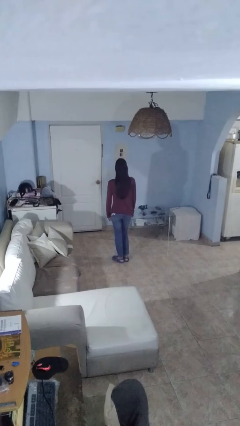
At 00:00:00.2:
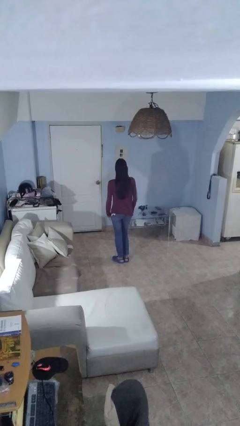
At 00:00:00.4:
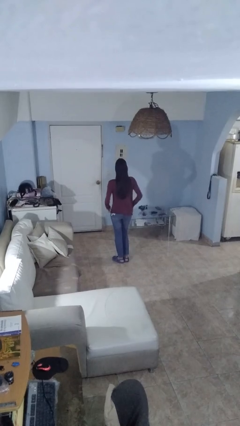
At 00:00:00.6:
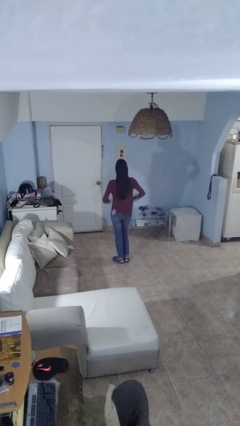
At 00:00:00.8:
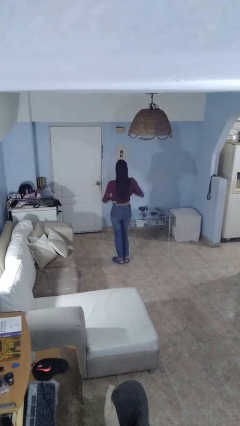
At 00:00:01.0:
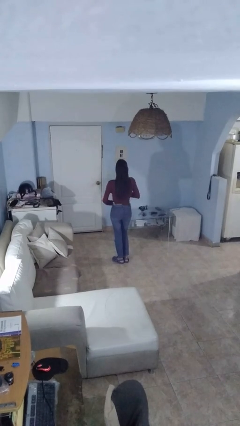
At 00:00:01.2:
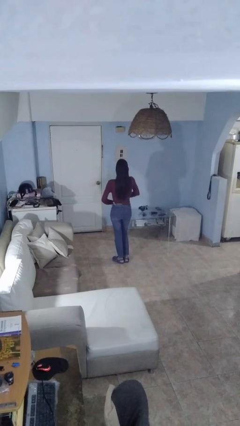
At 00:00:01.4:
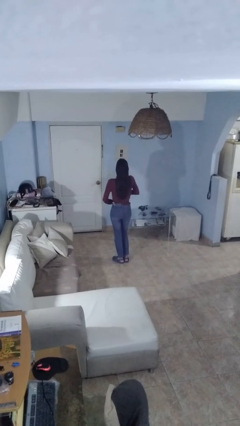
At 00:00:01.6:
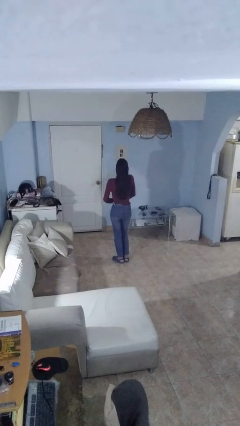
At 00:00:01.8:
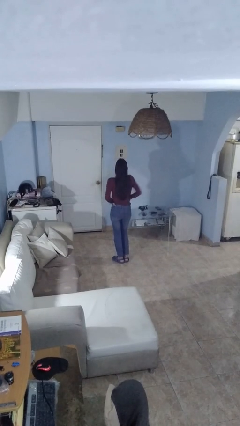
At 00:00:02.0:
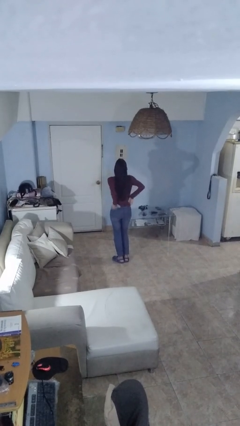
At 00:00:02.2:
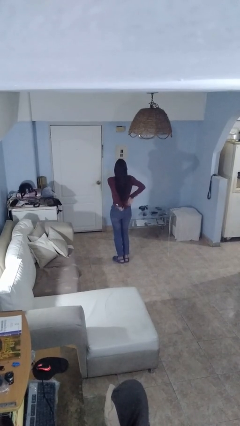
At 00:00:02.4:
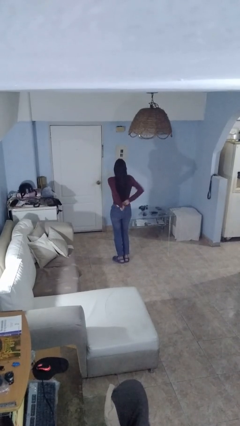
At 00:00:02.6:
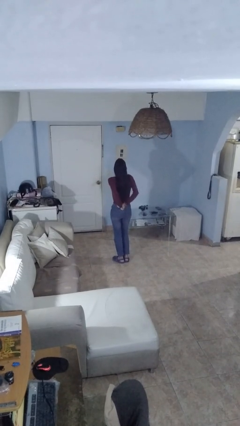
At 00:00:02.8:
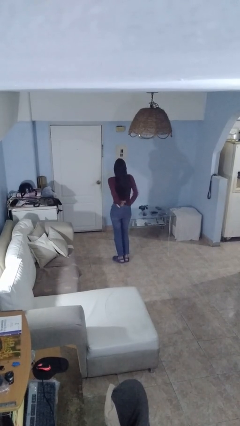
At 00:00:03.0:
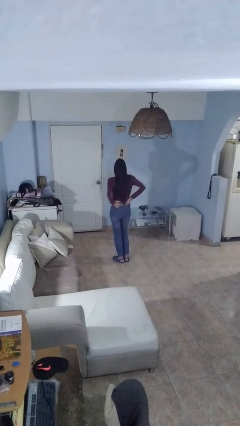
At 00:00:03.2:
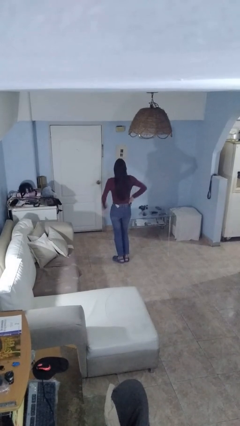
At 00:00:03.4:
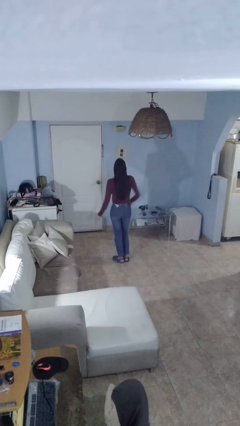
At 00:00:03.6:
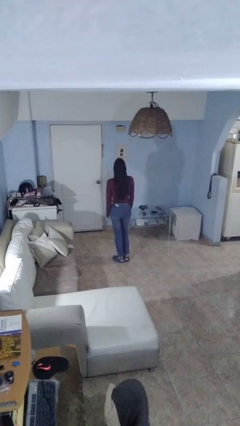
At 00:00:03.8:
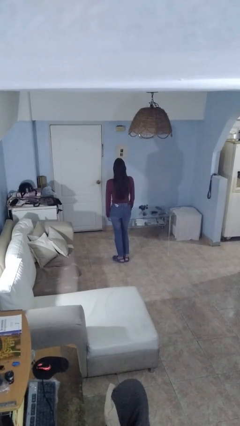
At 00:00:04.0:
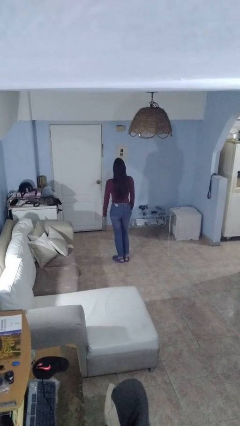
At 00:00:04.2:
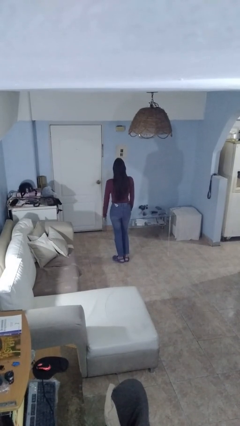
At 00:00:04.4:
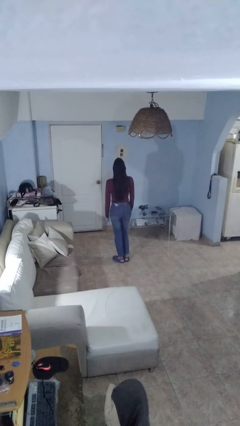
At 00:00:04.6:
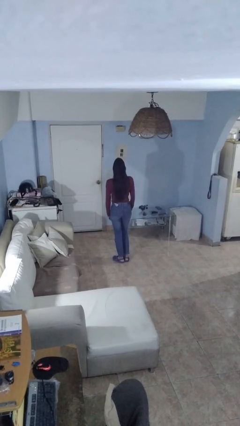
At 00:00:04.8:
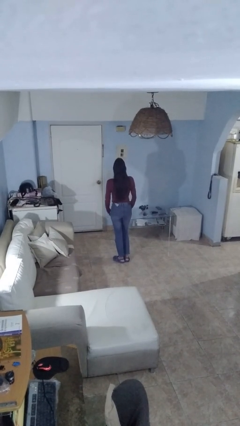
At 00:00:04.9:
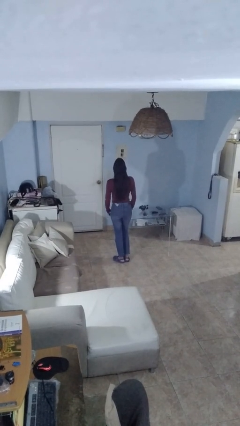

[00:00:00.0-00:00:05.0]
person tucks in shirt

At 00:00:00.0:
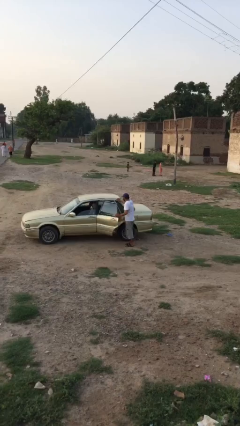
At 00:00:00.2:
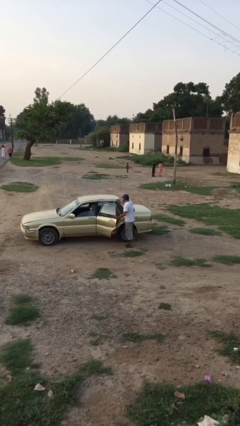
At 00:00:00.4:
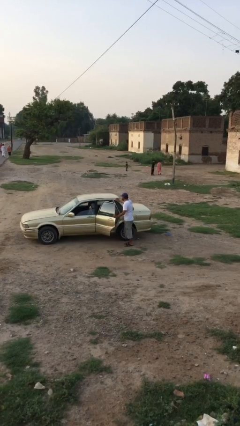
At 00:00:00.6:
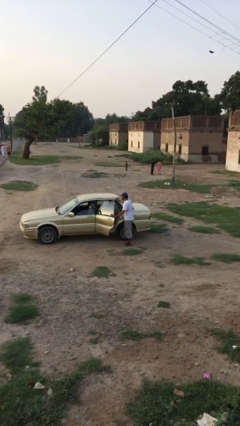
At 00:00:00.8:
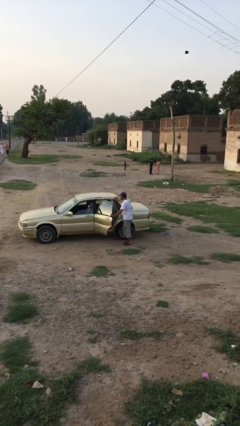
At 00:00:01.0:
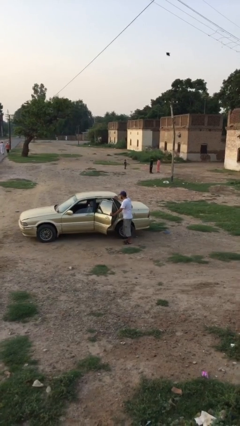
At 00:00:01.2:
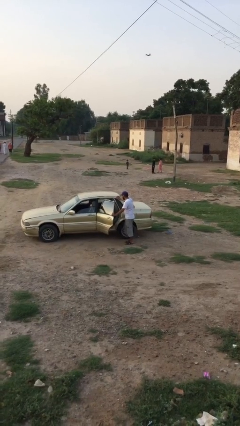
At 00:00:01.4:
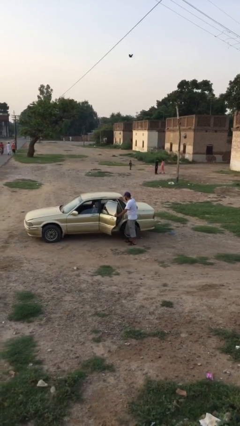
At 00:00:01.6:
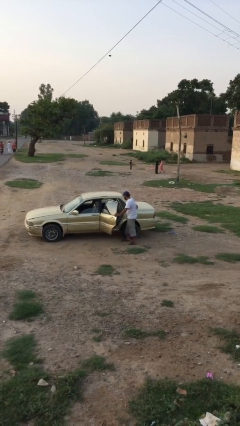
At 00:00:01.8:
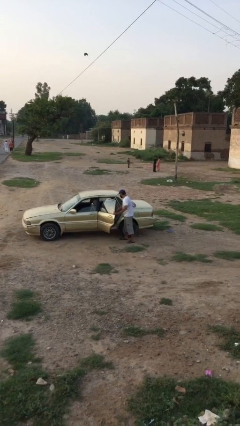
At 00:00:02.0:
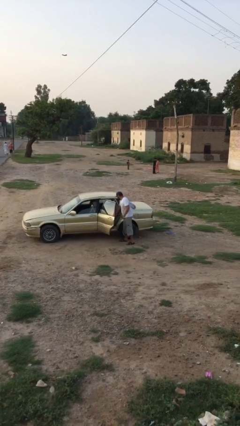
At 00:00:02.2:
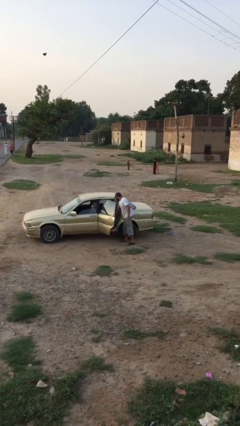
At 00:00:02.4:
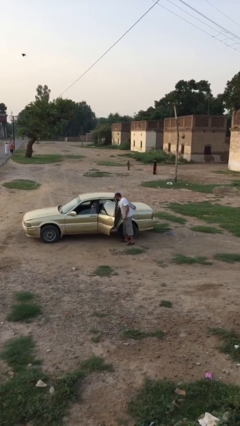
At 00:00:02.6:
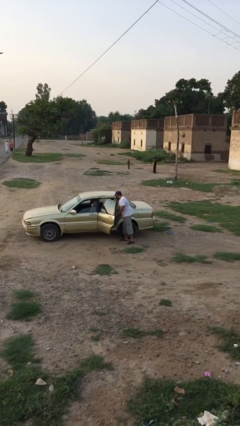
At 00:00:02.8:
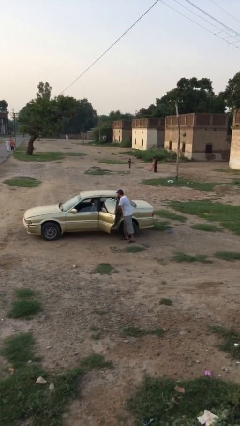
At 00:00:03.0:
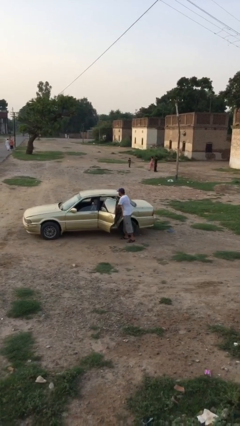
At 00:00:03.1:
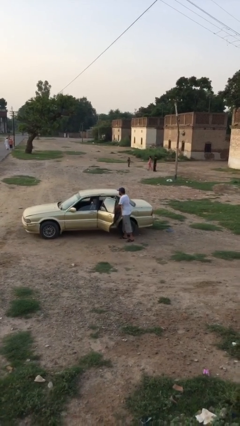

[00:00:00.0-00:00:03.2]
person unloads car

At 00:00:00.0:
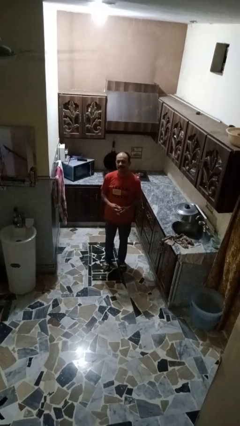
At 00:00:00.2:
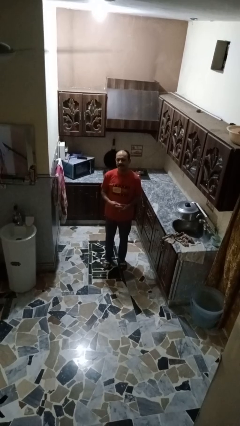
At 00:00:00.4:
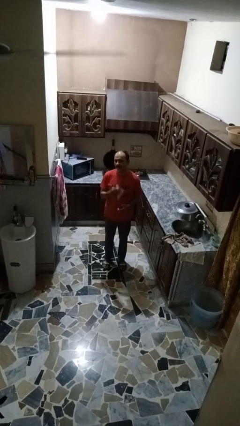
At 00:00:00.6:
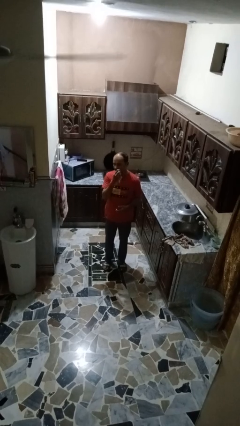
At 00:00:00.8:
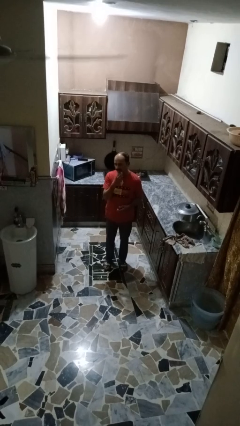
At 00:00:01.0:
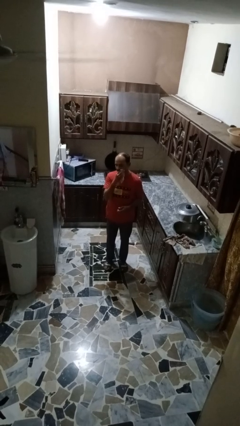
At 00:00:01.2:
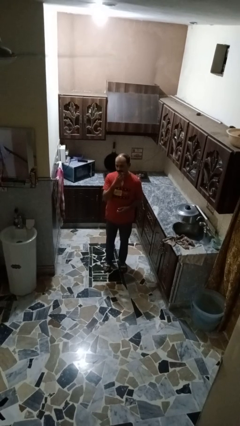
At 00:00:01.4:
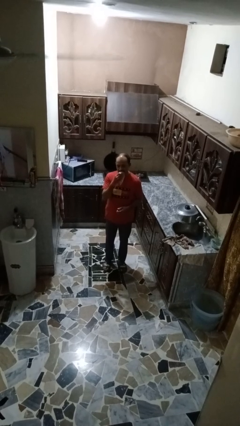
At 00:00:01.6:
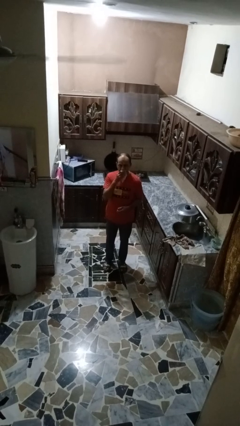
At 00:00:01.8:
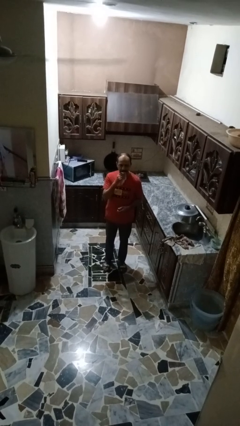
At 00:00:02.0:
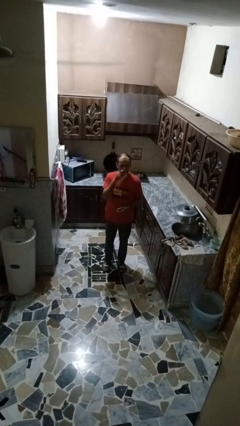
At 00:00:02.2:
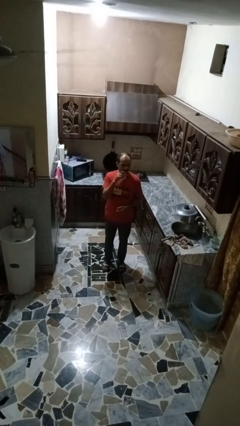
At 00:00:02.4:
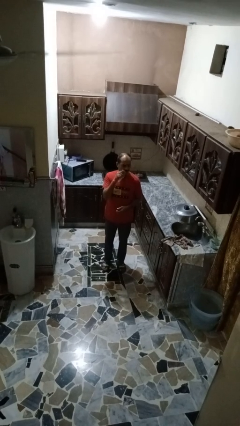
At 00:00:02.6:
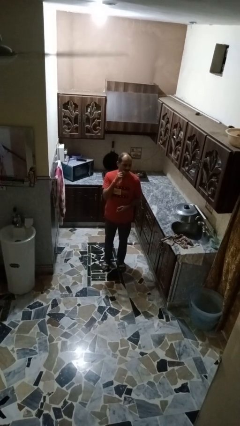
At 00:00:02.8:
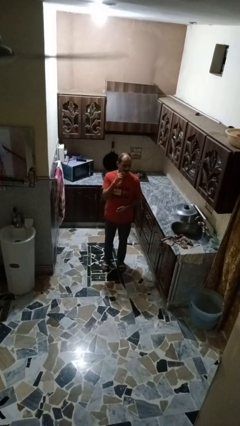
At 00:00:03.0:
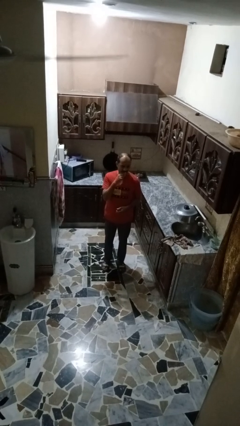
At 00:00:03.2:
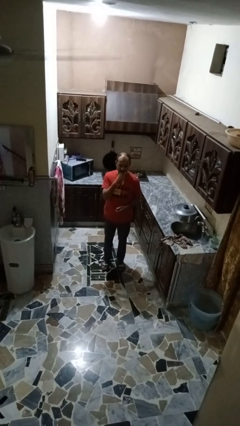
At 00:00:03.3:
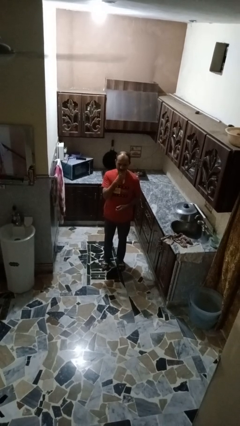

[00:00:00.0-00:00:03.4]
person wipes mouth with napkin

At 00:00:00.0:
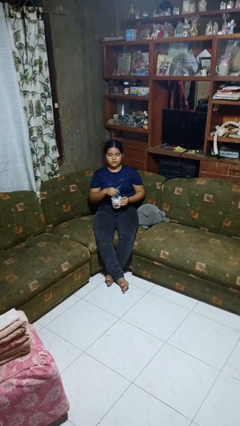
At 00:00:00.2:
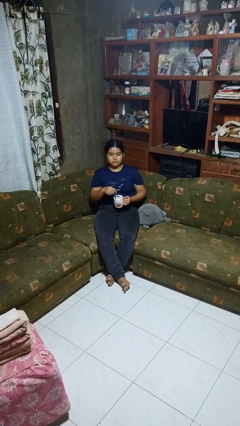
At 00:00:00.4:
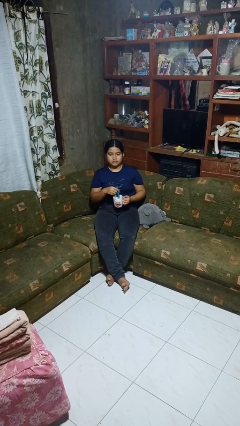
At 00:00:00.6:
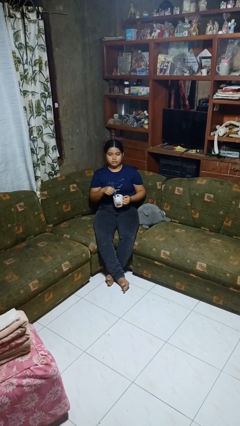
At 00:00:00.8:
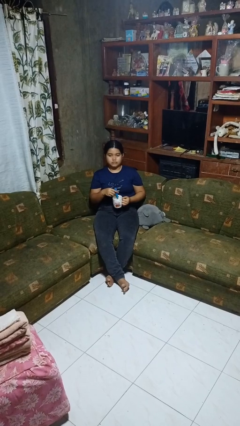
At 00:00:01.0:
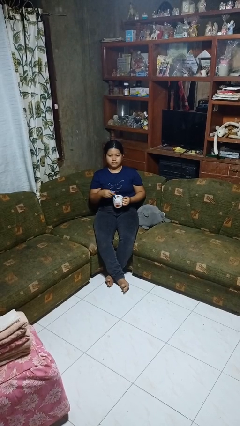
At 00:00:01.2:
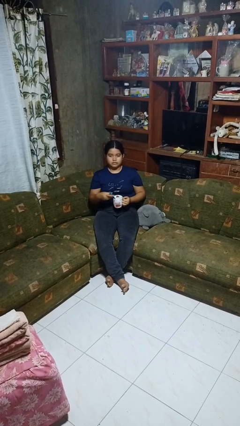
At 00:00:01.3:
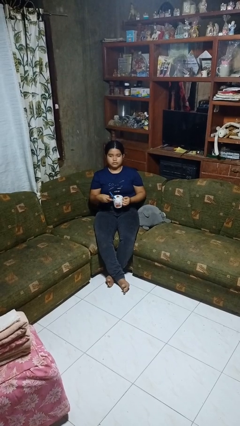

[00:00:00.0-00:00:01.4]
person stirs mug

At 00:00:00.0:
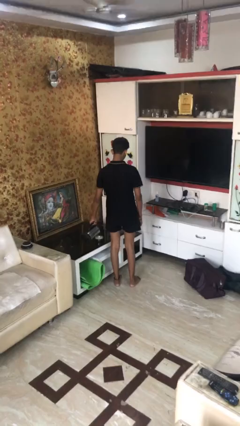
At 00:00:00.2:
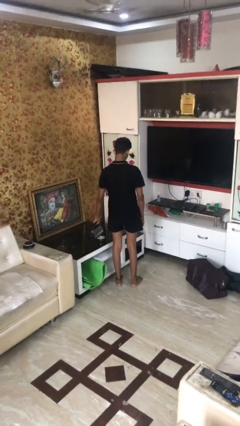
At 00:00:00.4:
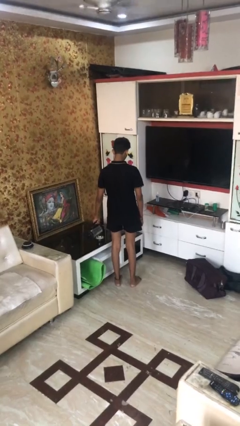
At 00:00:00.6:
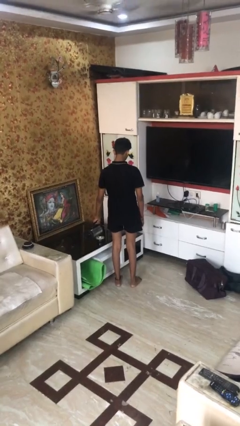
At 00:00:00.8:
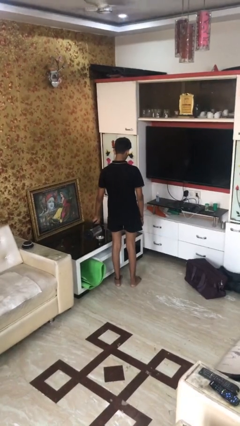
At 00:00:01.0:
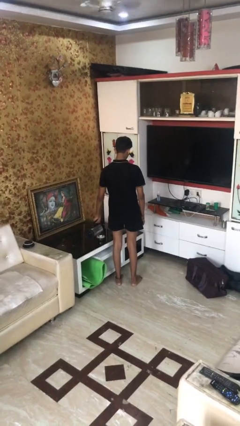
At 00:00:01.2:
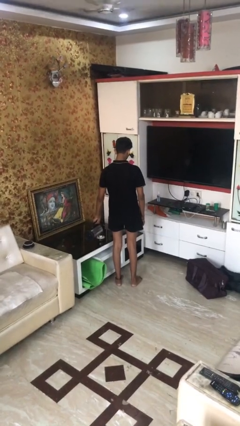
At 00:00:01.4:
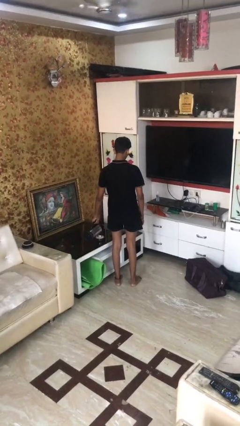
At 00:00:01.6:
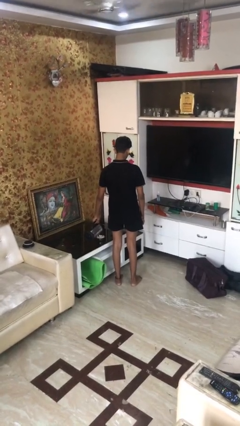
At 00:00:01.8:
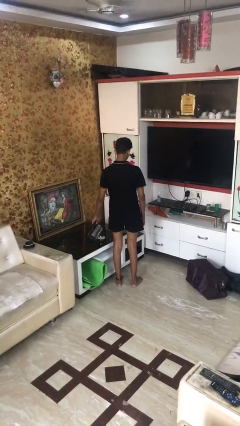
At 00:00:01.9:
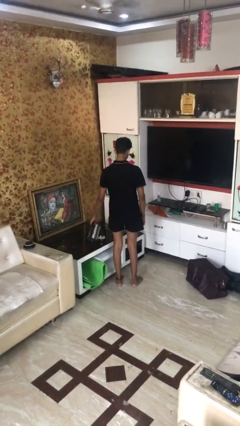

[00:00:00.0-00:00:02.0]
person pours into bowl

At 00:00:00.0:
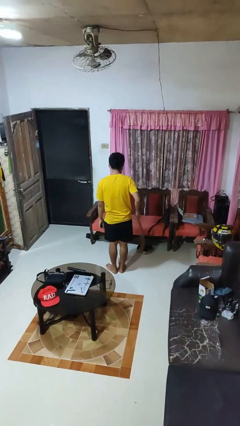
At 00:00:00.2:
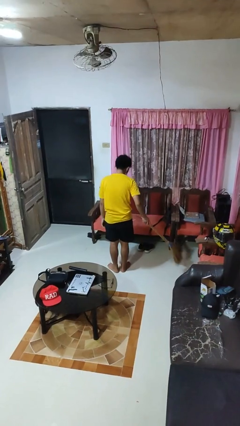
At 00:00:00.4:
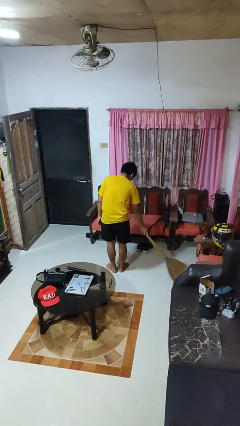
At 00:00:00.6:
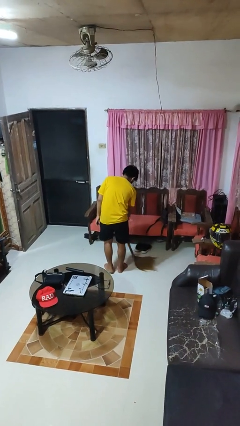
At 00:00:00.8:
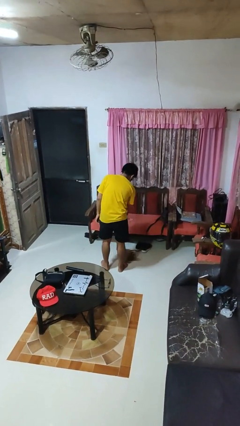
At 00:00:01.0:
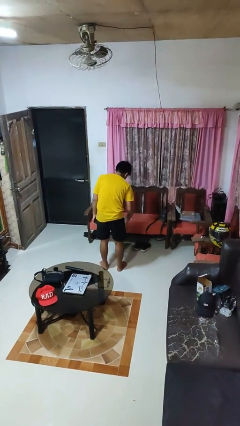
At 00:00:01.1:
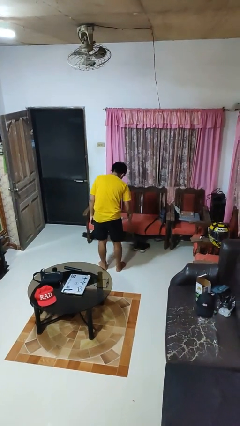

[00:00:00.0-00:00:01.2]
person sweeps floor

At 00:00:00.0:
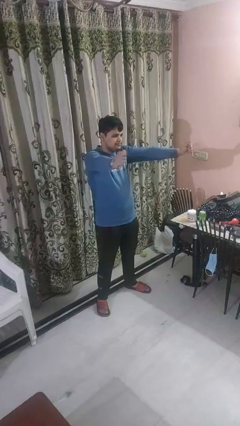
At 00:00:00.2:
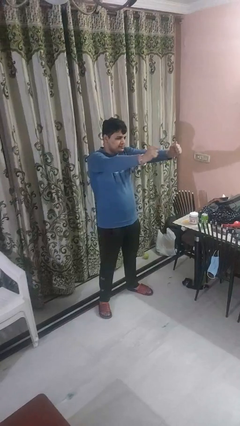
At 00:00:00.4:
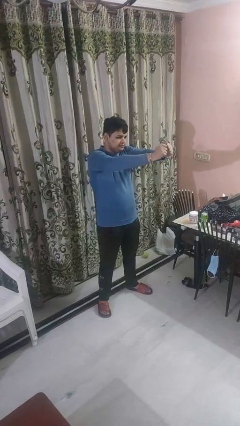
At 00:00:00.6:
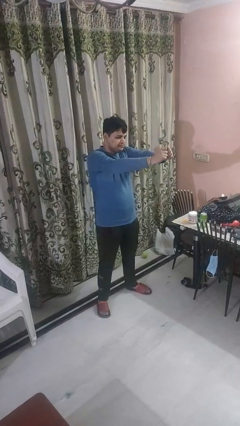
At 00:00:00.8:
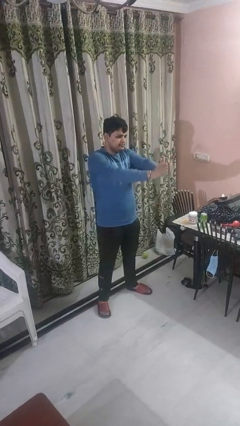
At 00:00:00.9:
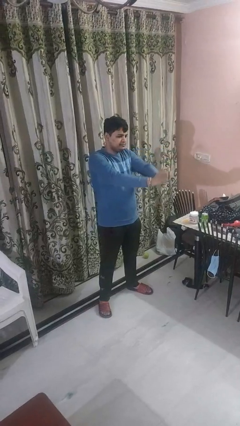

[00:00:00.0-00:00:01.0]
person gestures zoom out
